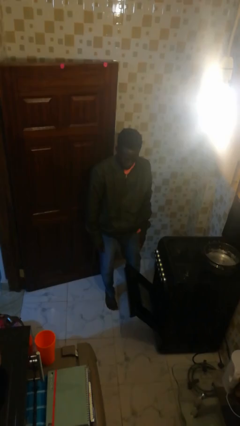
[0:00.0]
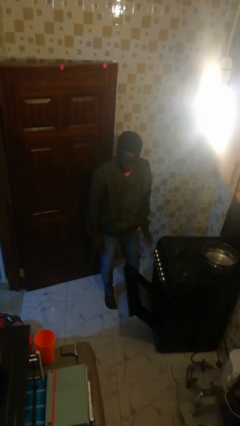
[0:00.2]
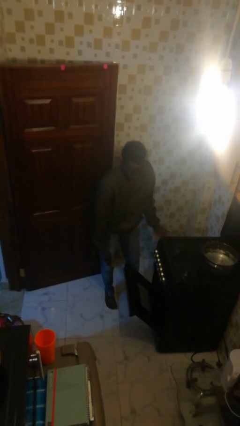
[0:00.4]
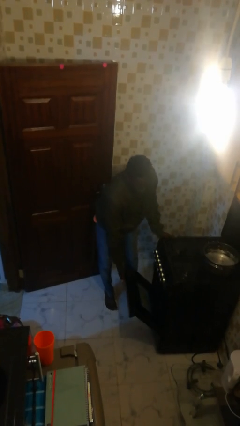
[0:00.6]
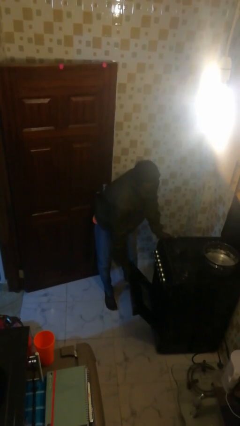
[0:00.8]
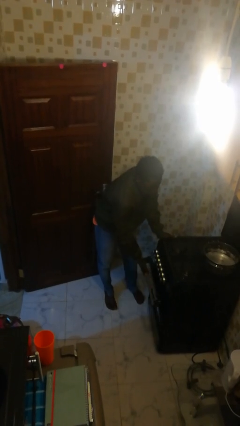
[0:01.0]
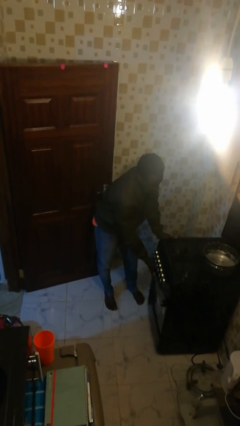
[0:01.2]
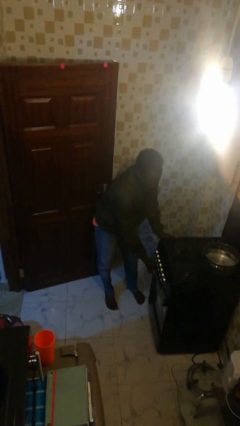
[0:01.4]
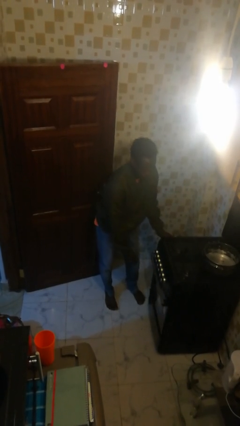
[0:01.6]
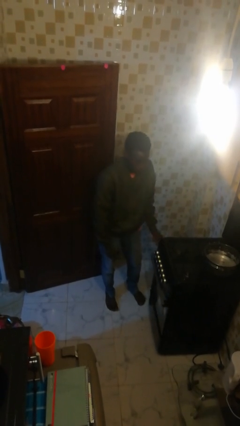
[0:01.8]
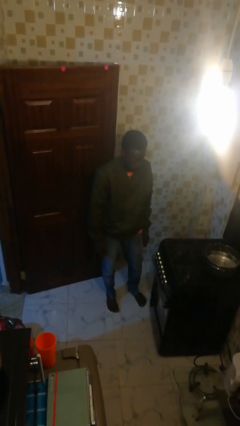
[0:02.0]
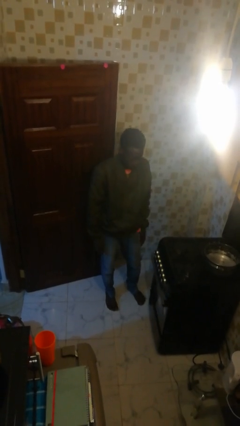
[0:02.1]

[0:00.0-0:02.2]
person closes oven door

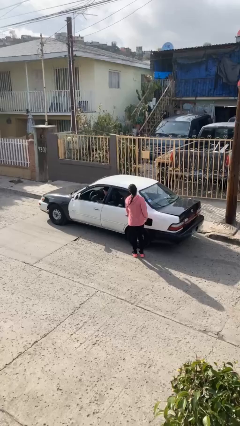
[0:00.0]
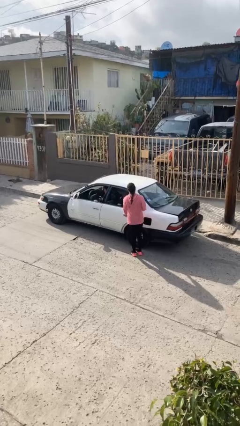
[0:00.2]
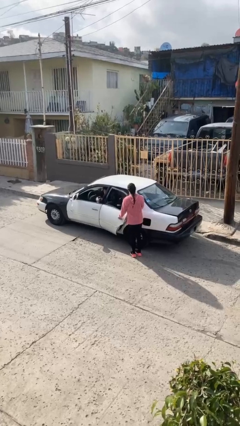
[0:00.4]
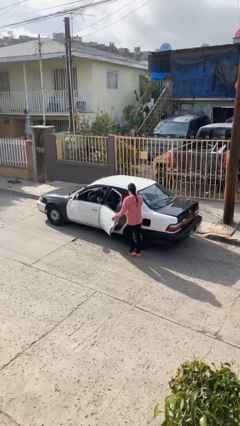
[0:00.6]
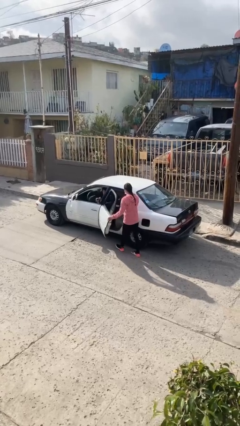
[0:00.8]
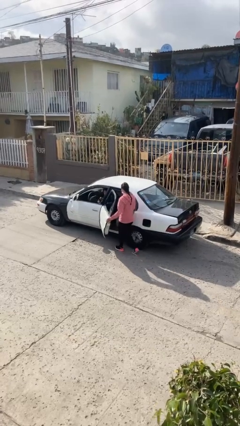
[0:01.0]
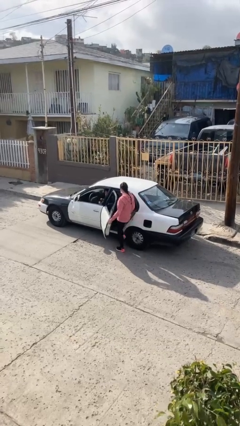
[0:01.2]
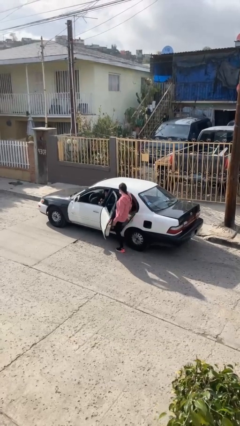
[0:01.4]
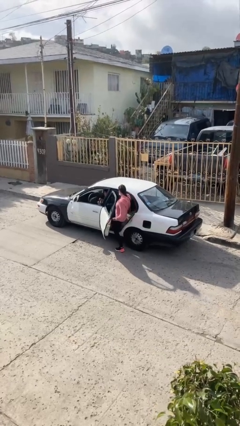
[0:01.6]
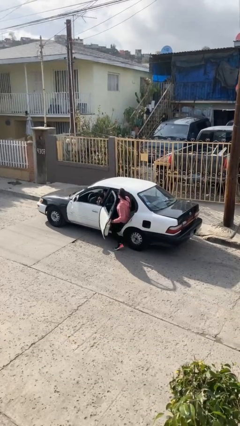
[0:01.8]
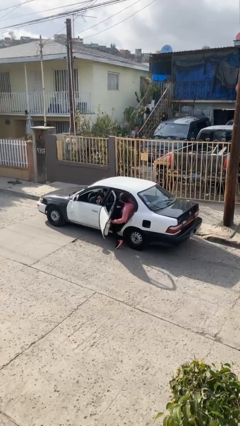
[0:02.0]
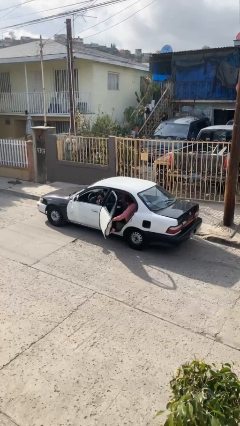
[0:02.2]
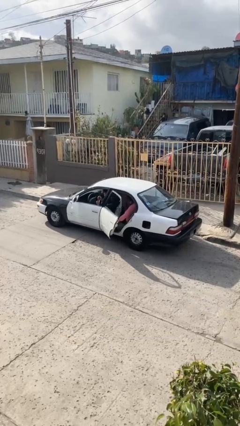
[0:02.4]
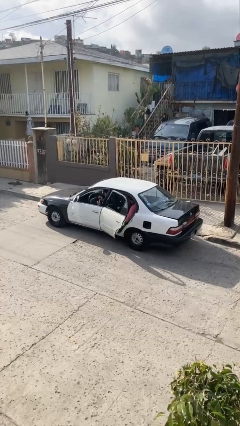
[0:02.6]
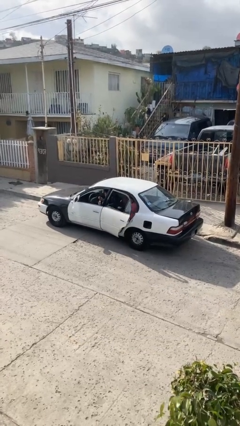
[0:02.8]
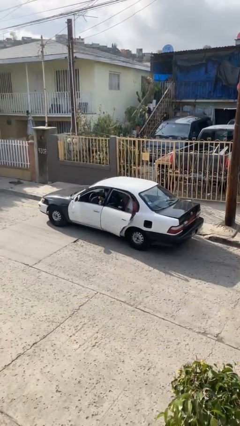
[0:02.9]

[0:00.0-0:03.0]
car picks up person

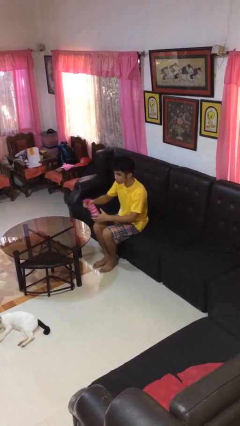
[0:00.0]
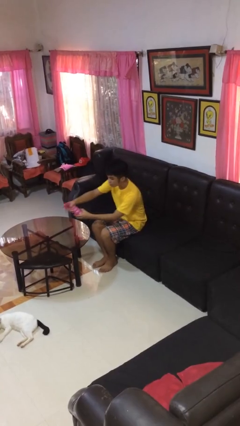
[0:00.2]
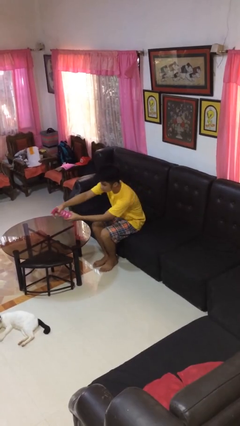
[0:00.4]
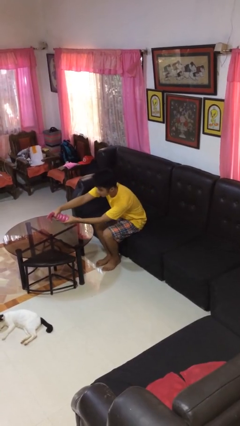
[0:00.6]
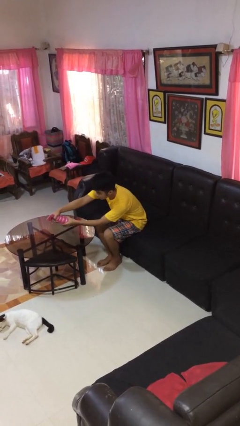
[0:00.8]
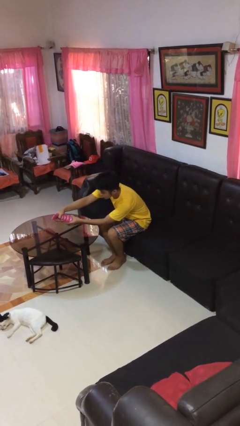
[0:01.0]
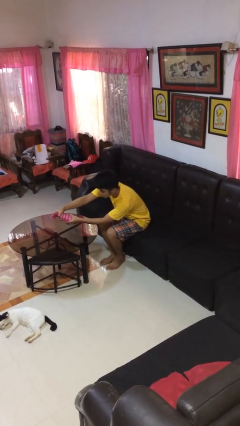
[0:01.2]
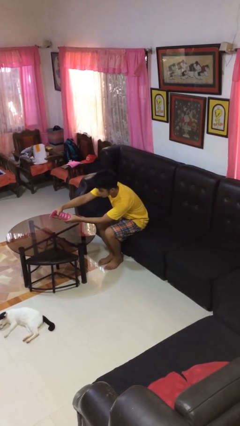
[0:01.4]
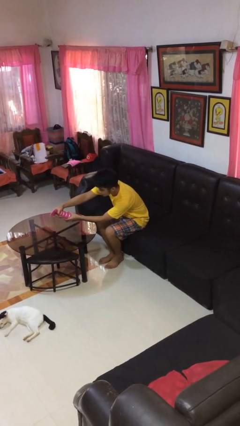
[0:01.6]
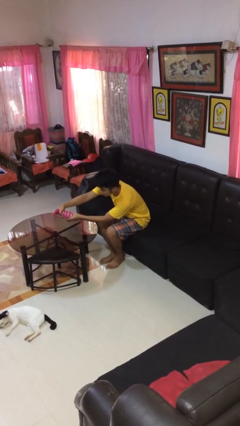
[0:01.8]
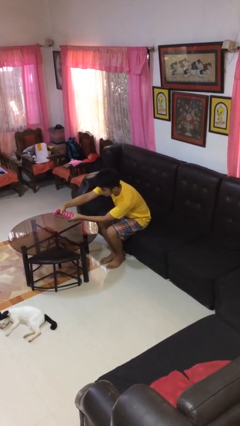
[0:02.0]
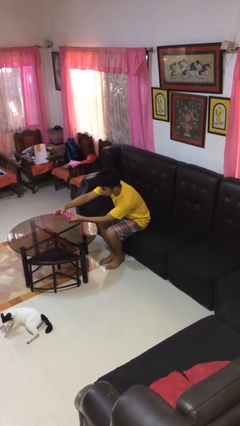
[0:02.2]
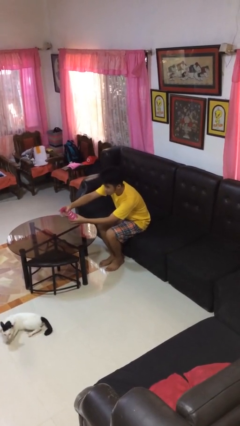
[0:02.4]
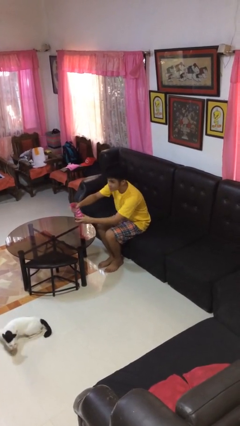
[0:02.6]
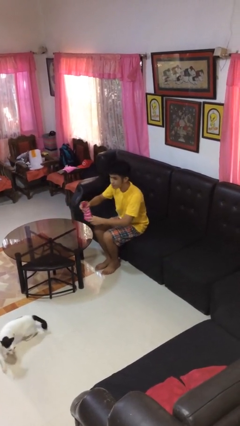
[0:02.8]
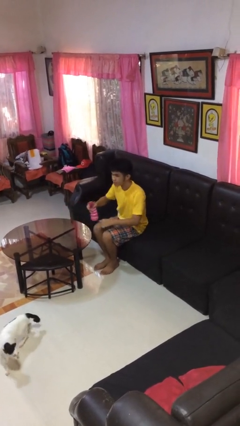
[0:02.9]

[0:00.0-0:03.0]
person sprays from bottle

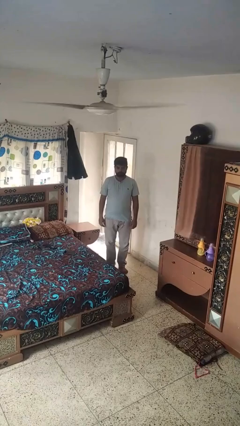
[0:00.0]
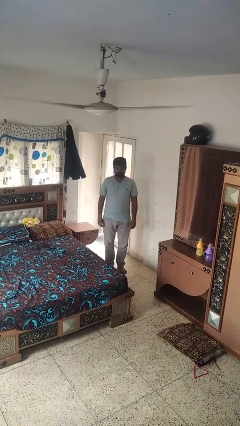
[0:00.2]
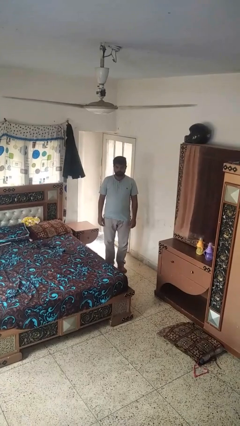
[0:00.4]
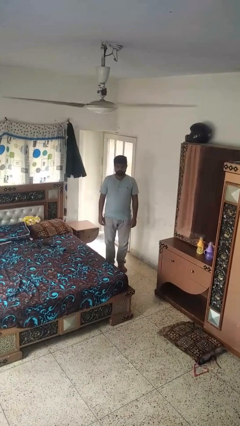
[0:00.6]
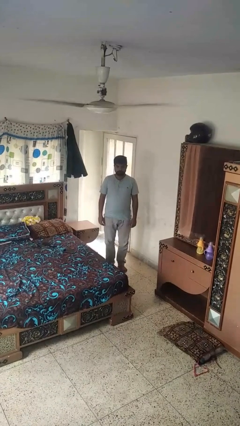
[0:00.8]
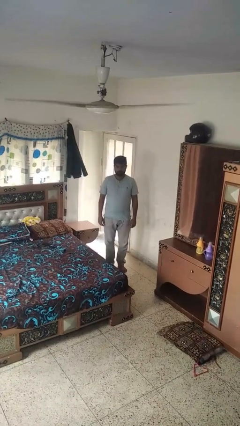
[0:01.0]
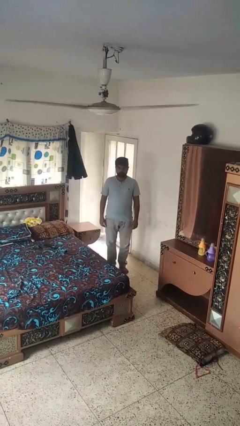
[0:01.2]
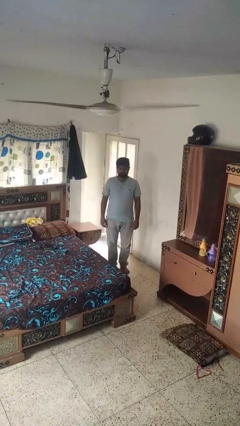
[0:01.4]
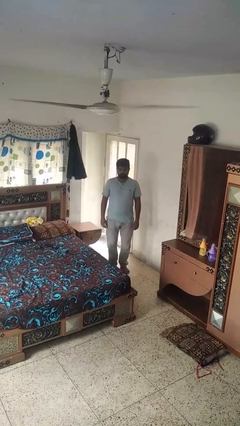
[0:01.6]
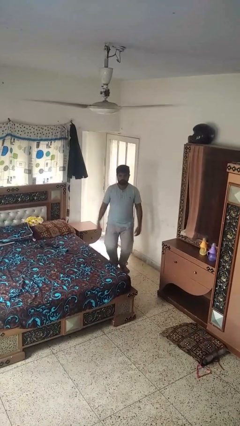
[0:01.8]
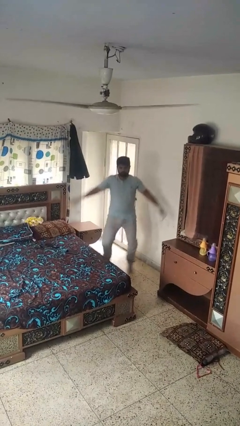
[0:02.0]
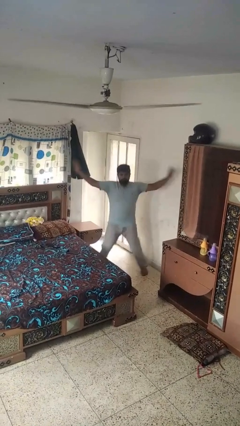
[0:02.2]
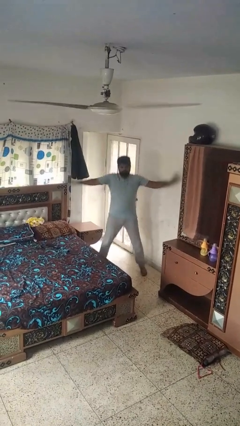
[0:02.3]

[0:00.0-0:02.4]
person exercises with jumping jacks

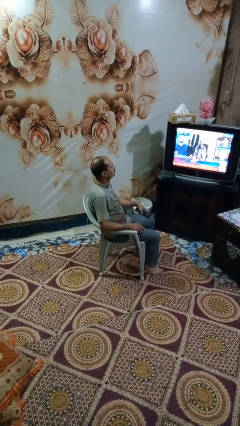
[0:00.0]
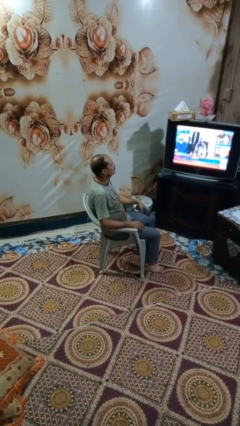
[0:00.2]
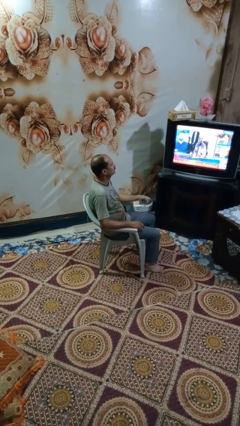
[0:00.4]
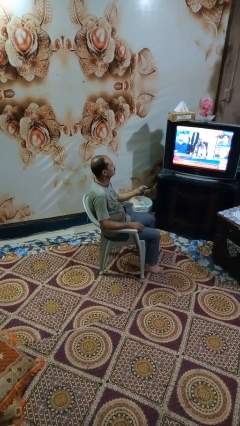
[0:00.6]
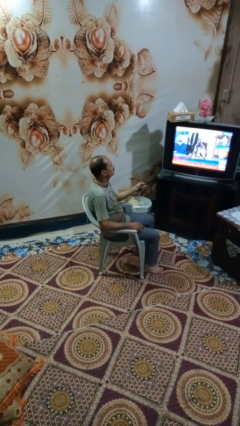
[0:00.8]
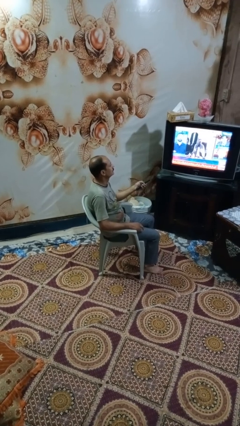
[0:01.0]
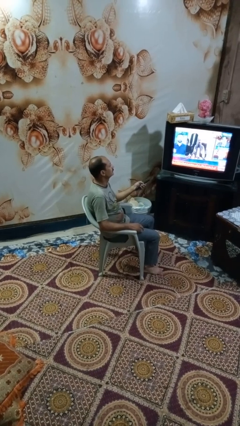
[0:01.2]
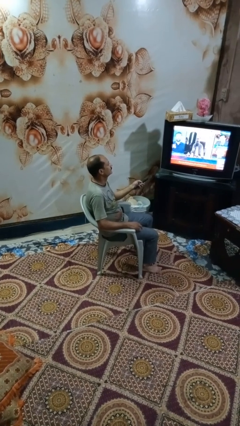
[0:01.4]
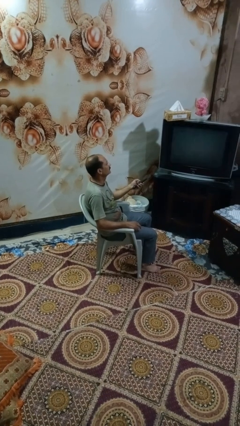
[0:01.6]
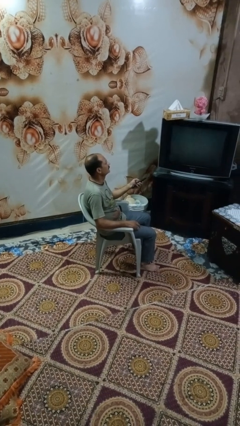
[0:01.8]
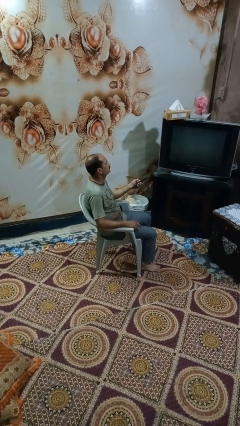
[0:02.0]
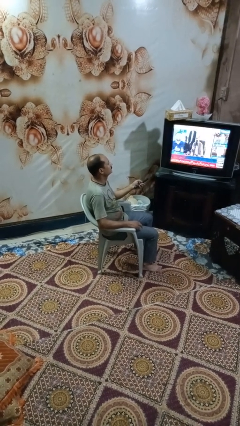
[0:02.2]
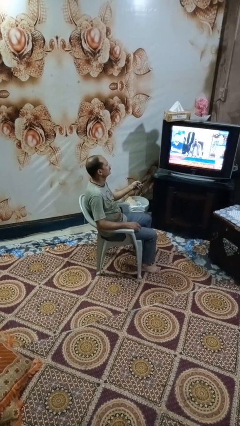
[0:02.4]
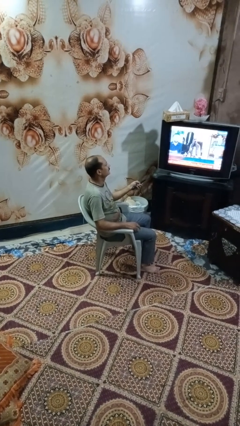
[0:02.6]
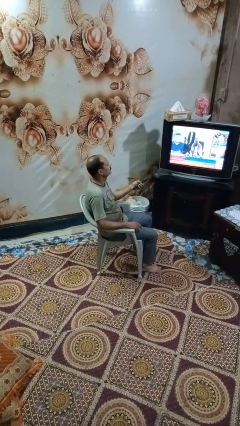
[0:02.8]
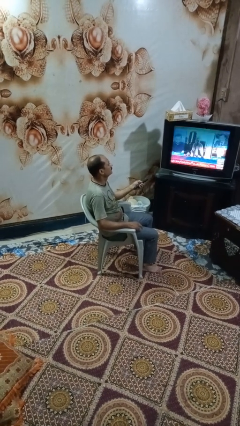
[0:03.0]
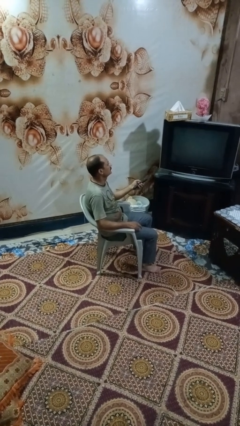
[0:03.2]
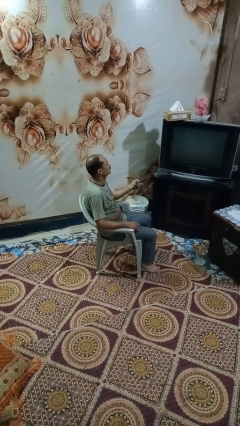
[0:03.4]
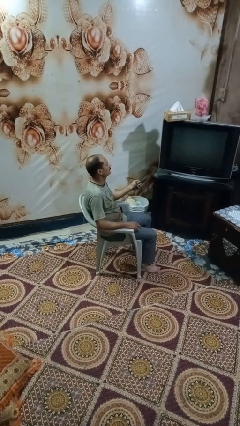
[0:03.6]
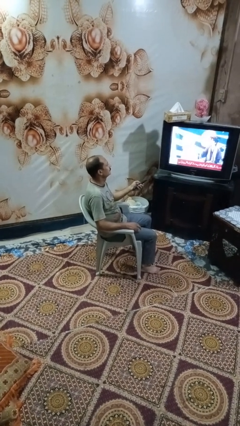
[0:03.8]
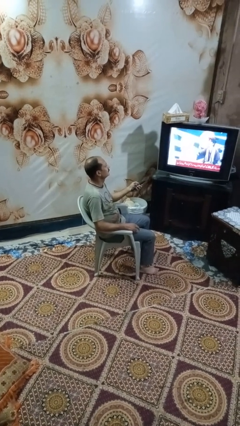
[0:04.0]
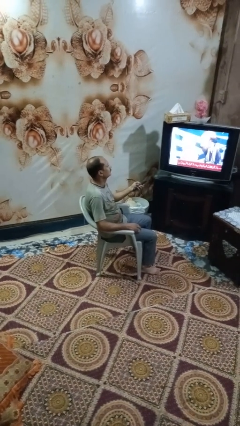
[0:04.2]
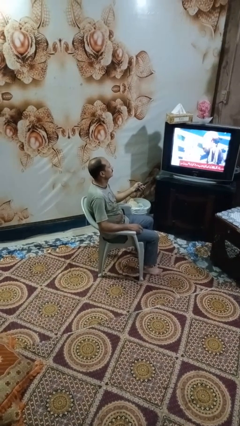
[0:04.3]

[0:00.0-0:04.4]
person uses television remote

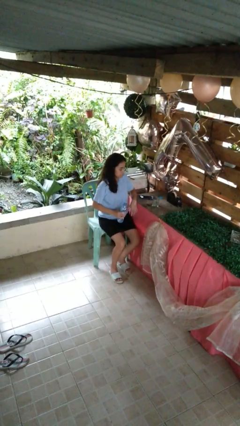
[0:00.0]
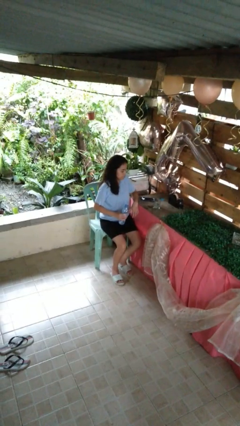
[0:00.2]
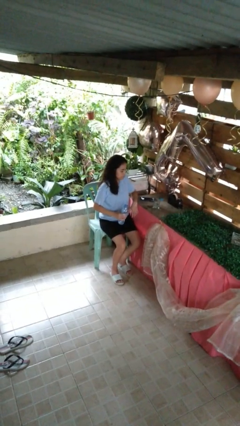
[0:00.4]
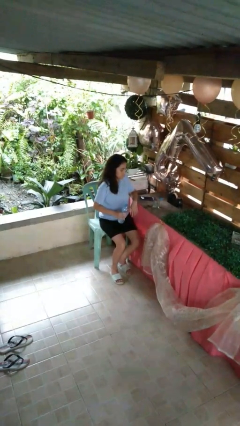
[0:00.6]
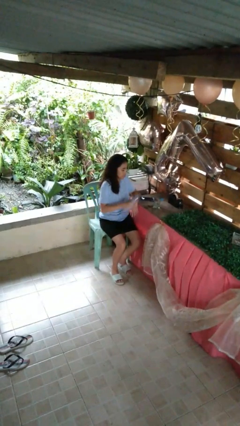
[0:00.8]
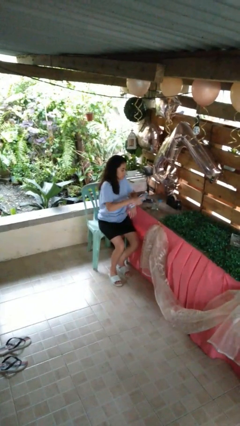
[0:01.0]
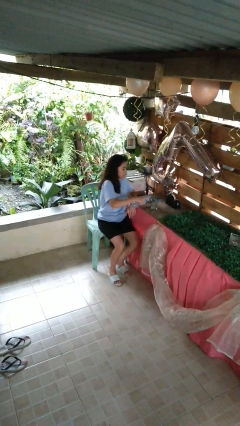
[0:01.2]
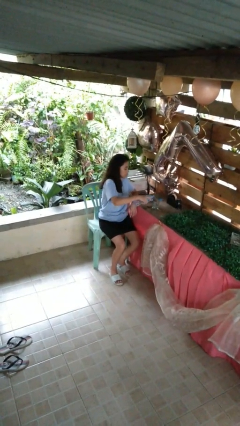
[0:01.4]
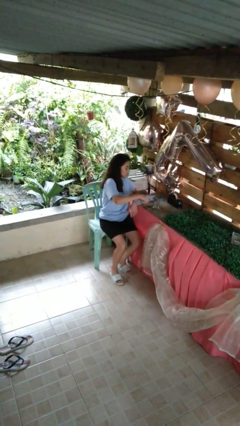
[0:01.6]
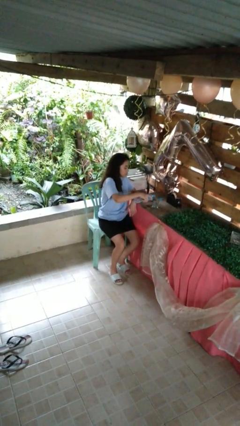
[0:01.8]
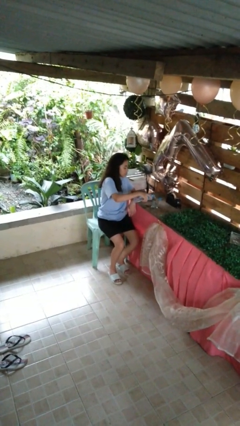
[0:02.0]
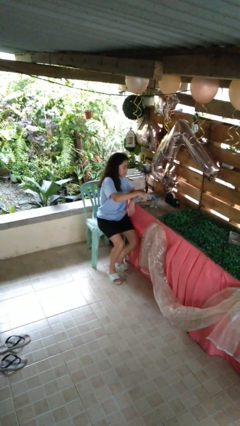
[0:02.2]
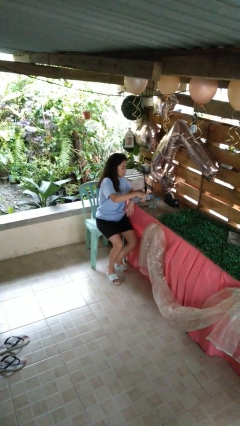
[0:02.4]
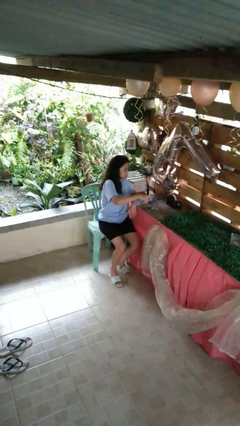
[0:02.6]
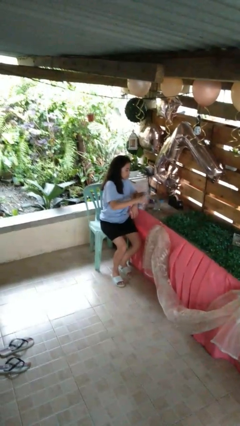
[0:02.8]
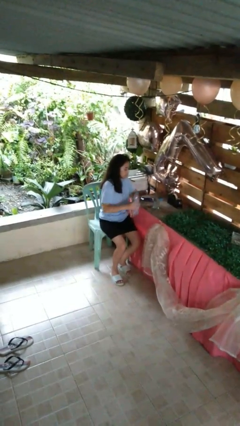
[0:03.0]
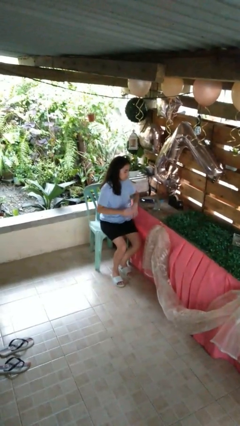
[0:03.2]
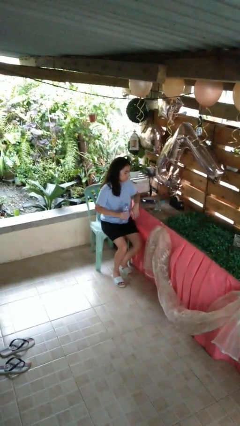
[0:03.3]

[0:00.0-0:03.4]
person pours liquid into cup
